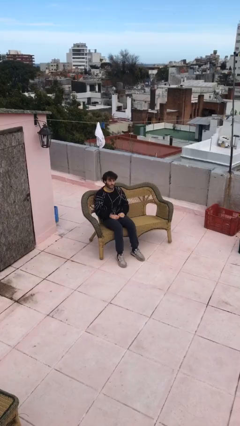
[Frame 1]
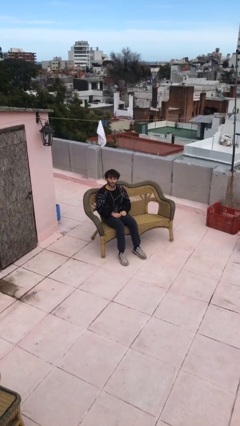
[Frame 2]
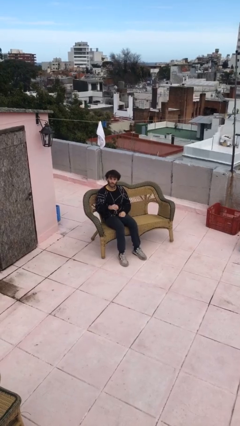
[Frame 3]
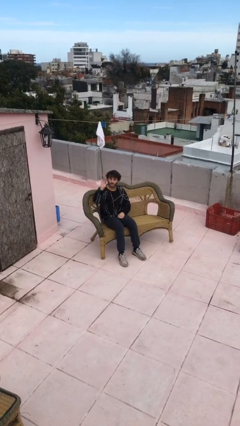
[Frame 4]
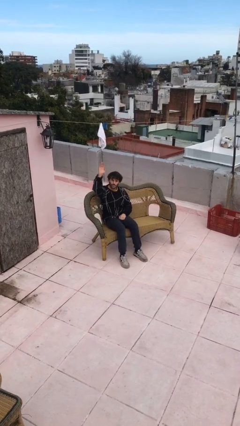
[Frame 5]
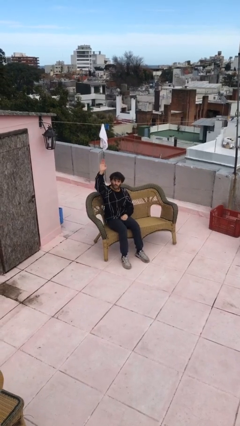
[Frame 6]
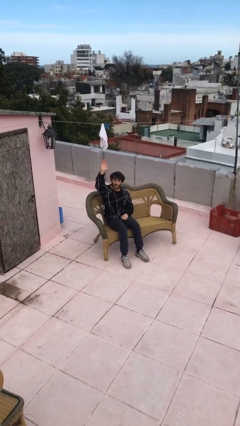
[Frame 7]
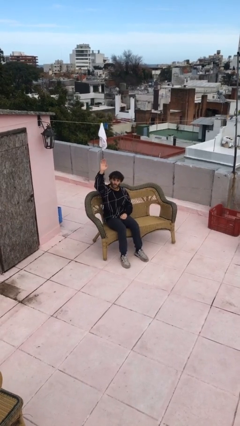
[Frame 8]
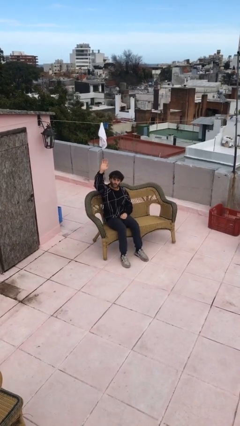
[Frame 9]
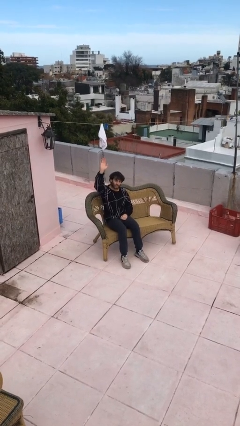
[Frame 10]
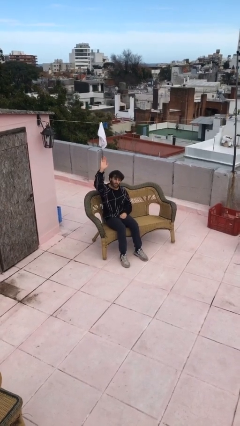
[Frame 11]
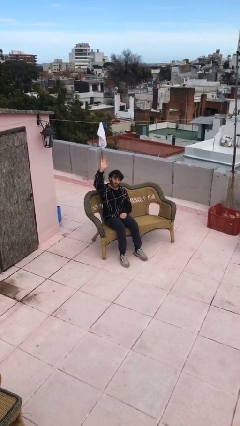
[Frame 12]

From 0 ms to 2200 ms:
person gestures raise hand

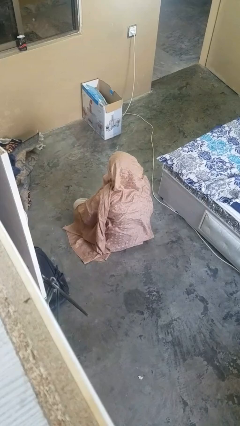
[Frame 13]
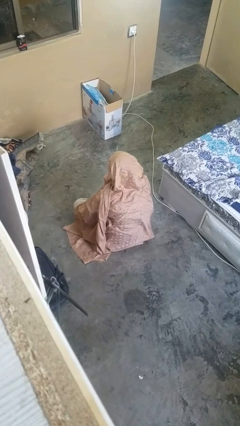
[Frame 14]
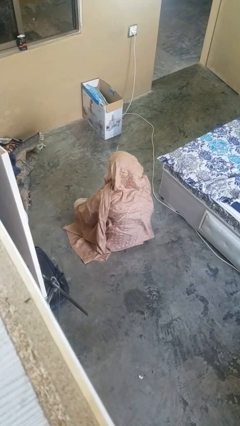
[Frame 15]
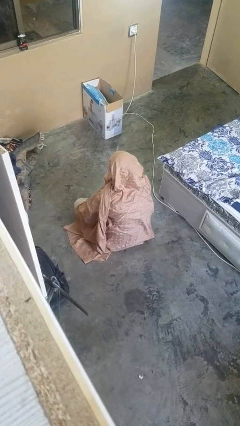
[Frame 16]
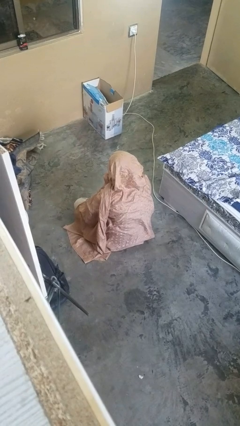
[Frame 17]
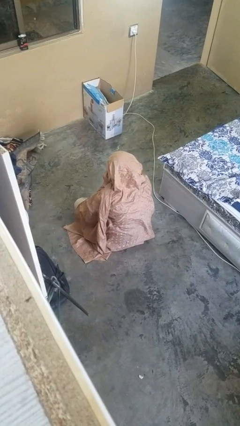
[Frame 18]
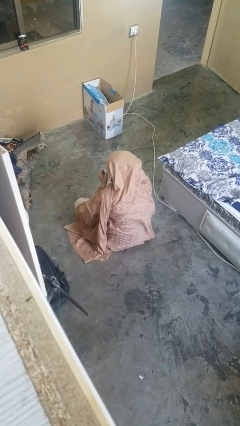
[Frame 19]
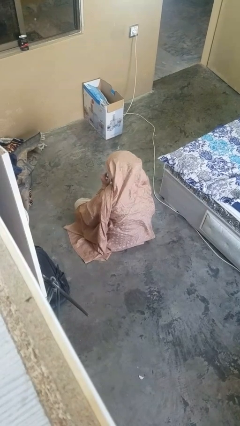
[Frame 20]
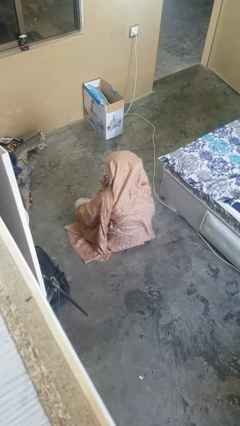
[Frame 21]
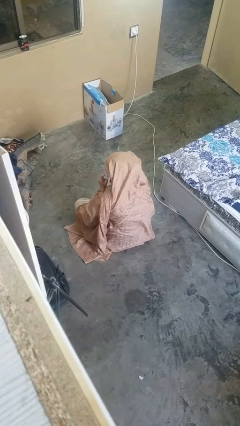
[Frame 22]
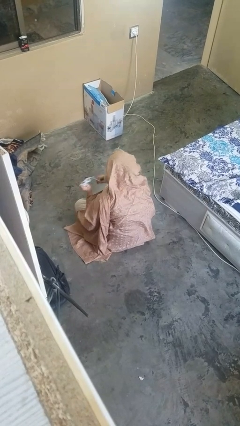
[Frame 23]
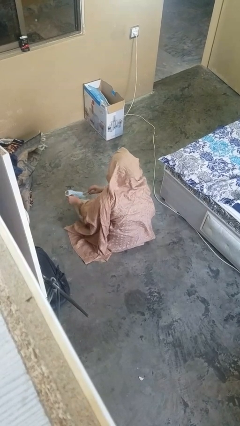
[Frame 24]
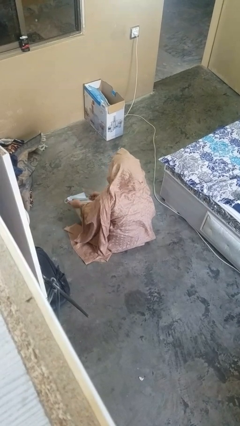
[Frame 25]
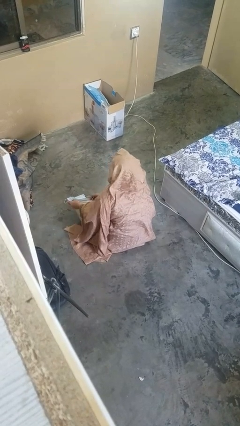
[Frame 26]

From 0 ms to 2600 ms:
person takes off facemask

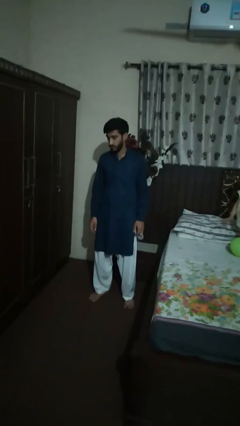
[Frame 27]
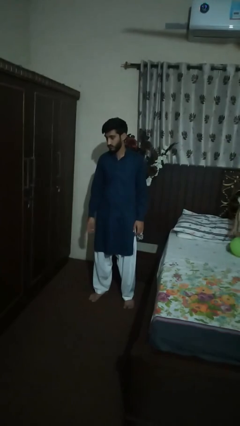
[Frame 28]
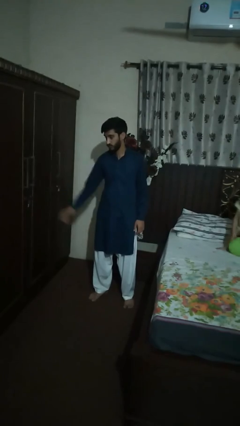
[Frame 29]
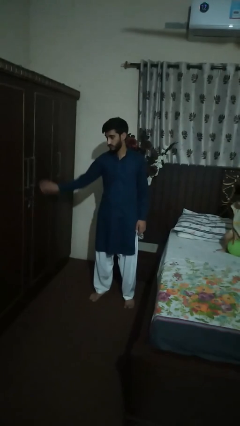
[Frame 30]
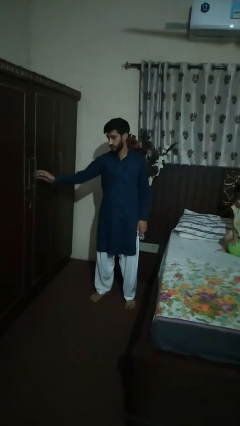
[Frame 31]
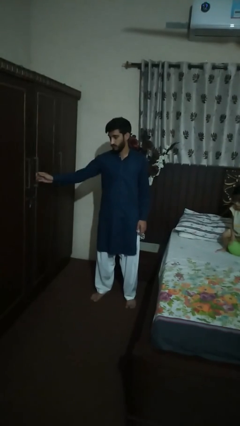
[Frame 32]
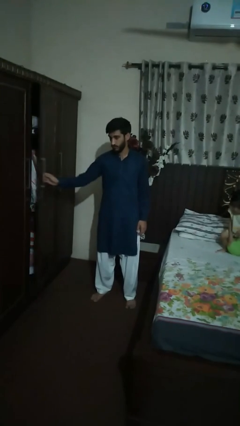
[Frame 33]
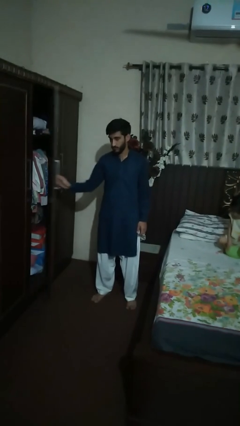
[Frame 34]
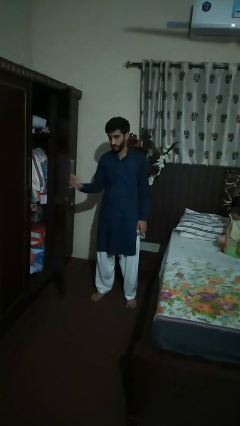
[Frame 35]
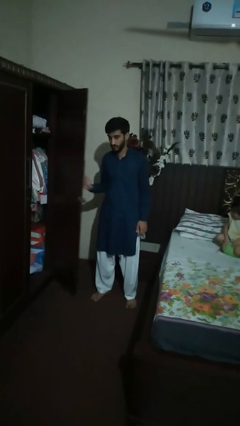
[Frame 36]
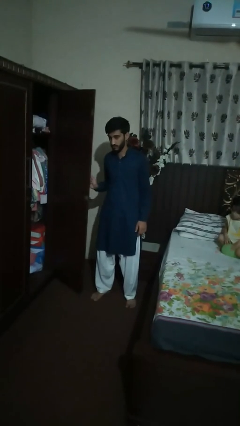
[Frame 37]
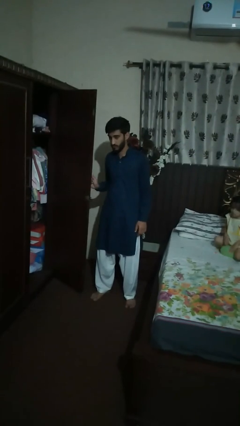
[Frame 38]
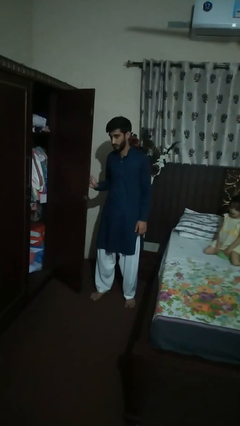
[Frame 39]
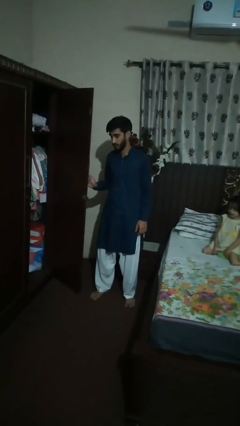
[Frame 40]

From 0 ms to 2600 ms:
person opens dresser drawer

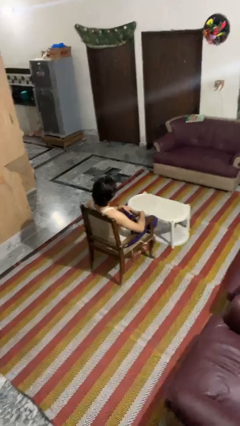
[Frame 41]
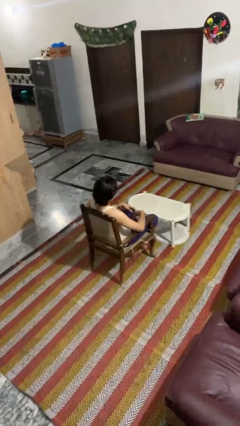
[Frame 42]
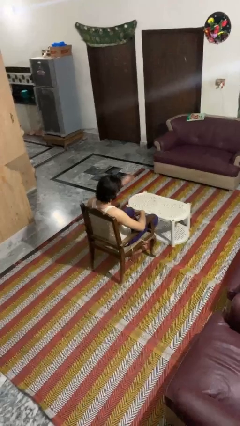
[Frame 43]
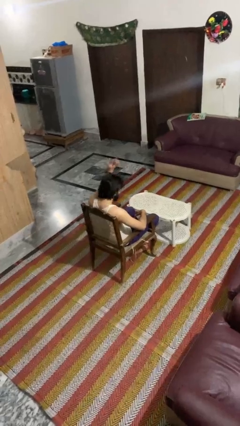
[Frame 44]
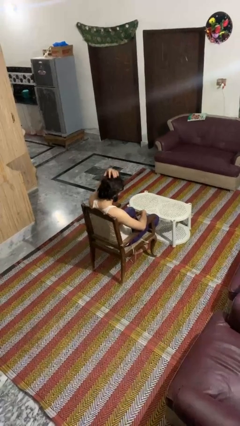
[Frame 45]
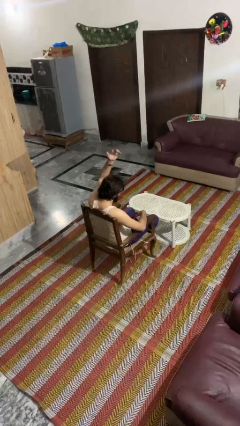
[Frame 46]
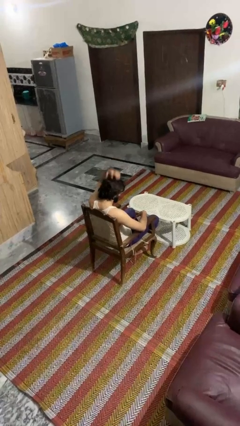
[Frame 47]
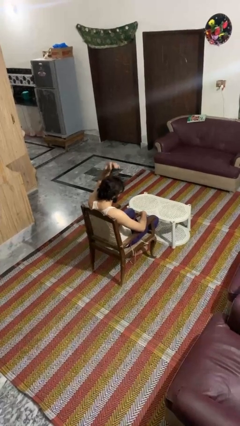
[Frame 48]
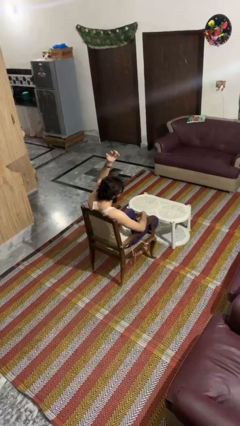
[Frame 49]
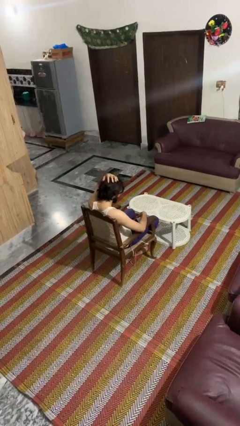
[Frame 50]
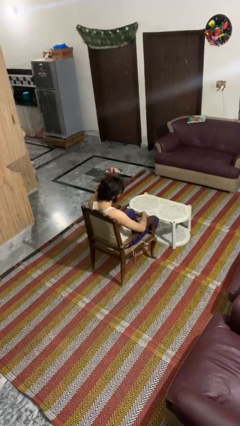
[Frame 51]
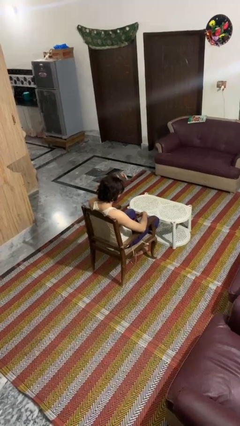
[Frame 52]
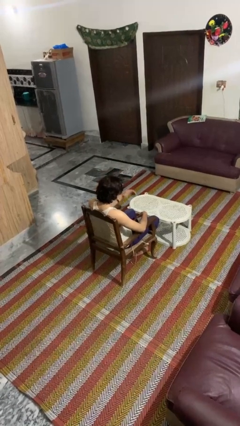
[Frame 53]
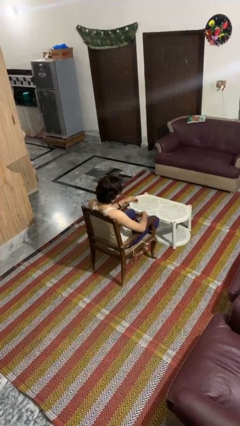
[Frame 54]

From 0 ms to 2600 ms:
person pats head

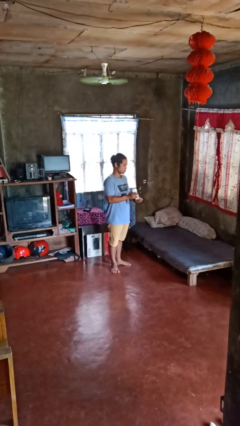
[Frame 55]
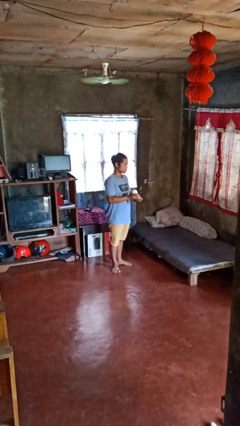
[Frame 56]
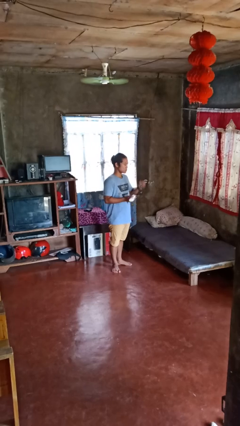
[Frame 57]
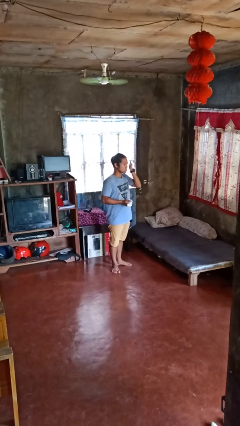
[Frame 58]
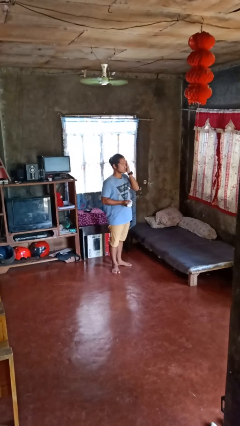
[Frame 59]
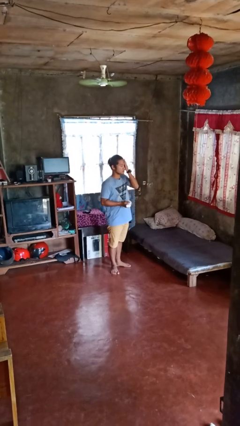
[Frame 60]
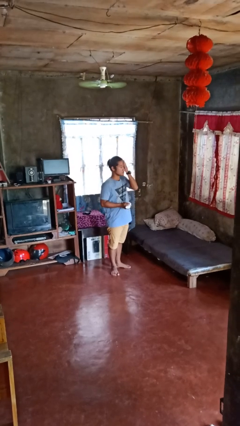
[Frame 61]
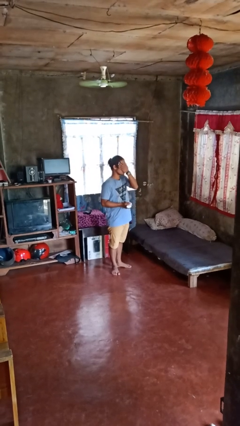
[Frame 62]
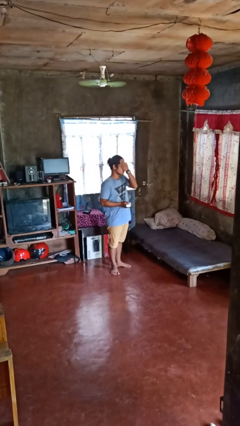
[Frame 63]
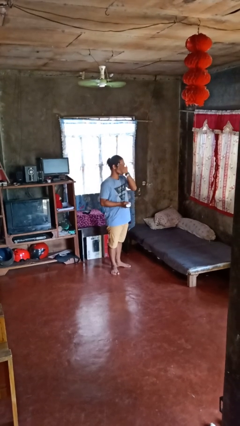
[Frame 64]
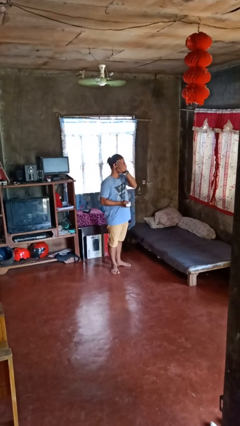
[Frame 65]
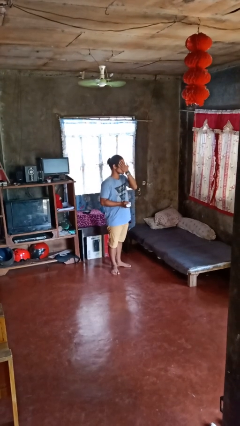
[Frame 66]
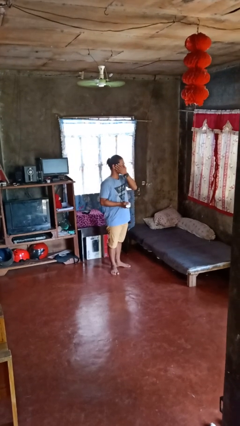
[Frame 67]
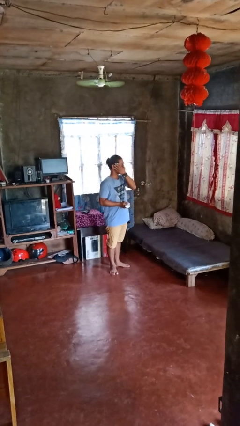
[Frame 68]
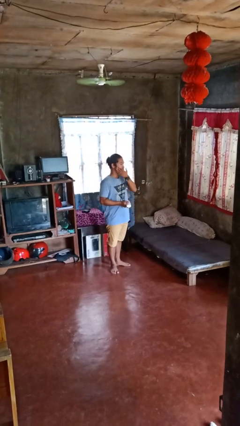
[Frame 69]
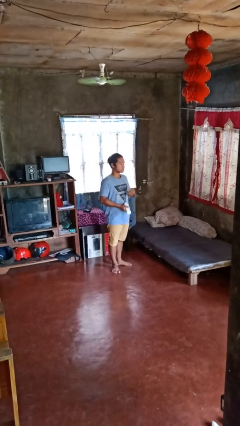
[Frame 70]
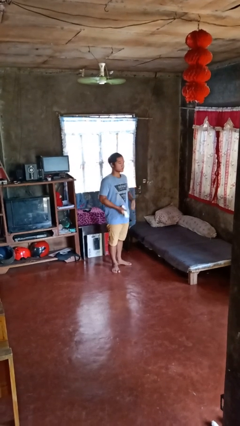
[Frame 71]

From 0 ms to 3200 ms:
person applies facial moisturizer

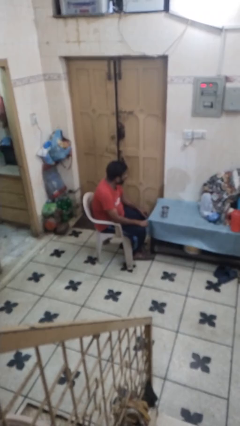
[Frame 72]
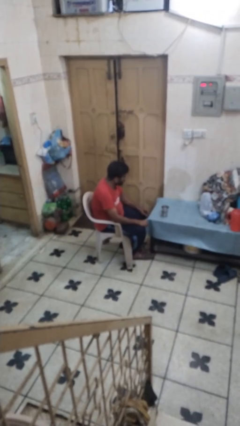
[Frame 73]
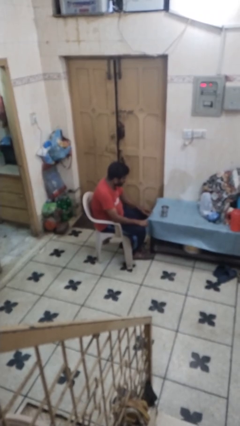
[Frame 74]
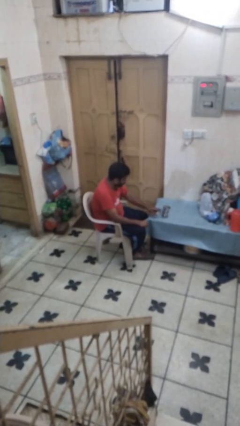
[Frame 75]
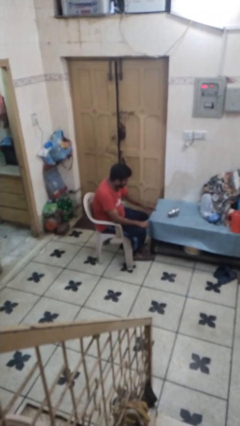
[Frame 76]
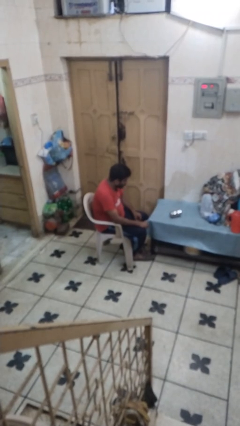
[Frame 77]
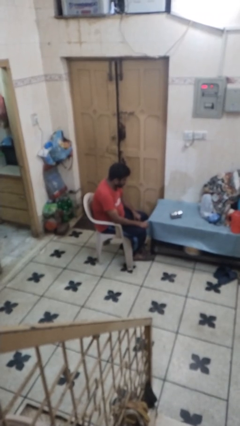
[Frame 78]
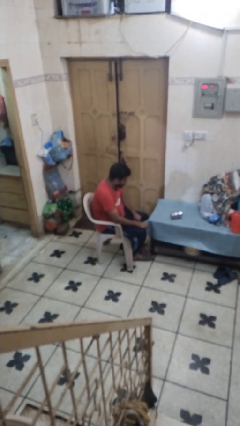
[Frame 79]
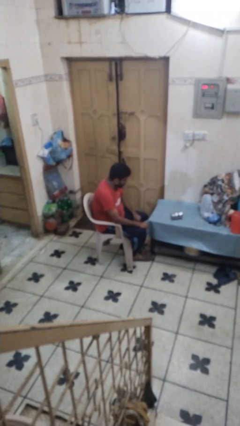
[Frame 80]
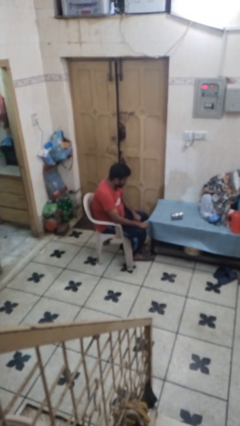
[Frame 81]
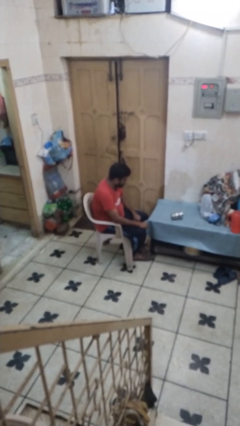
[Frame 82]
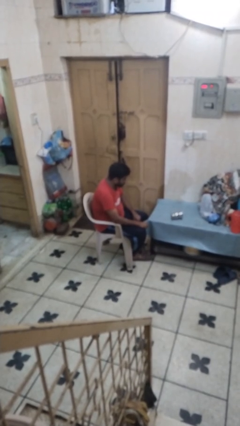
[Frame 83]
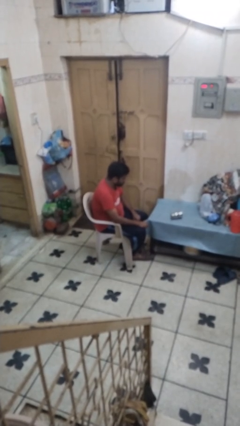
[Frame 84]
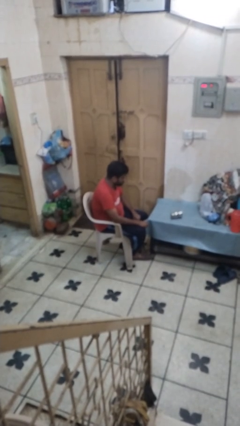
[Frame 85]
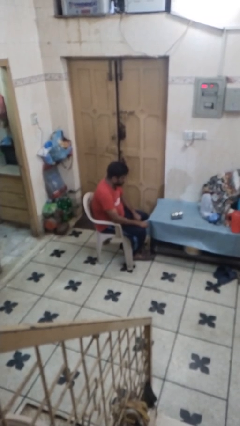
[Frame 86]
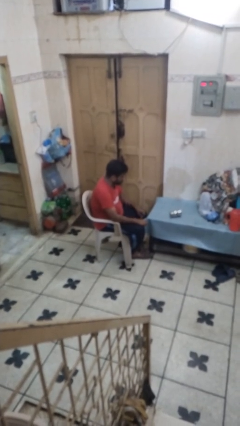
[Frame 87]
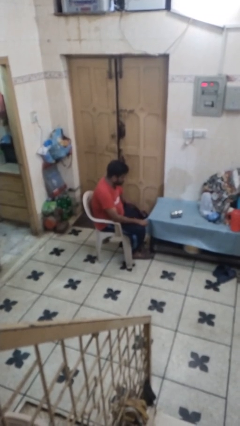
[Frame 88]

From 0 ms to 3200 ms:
person knocks over glass

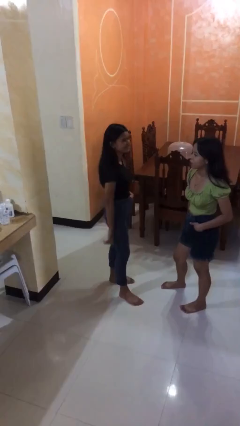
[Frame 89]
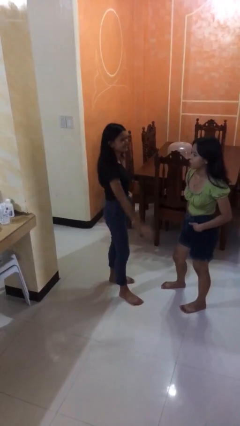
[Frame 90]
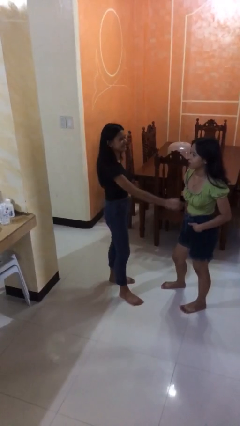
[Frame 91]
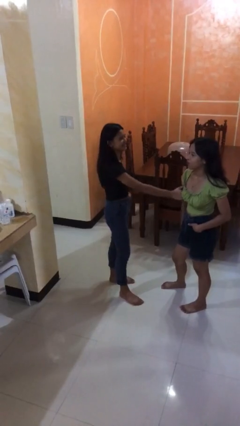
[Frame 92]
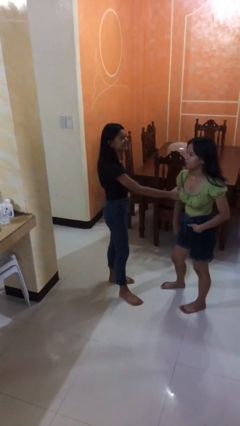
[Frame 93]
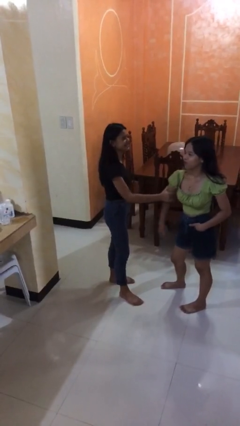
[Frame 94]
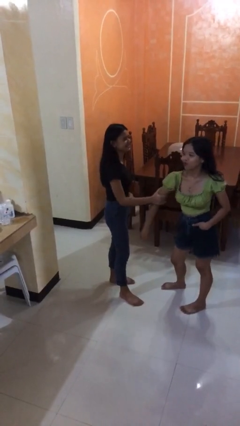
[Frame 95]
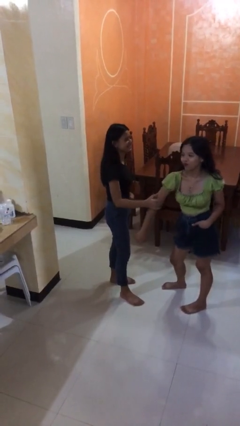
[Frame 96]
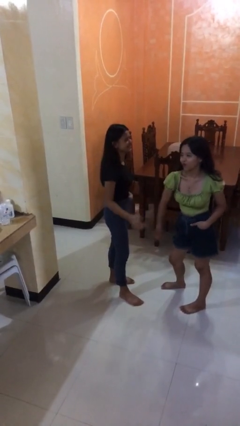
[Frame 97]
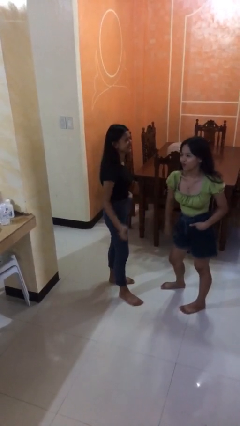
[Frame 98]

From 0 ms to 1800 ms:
person grabs person by bicep
